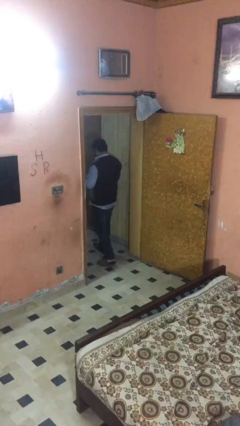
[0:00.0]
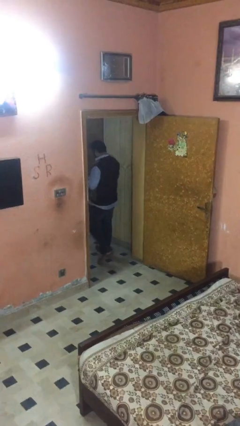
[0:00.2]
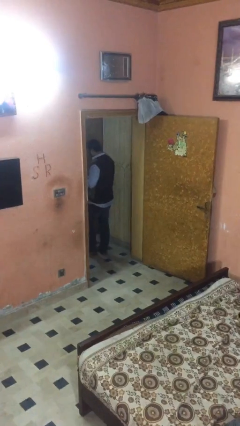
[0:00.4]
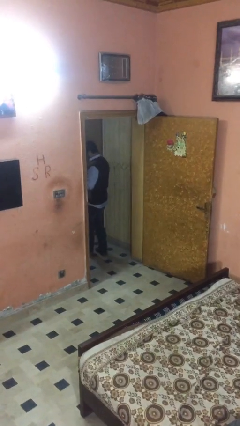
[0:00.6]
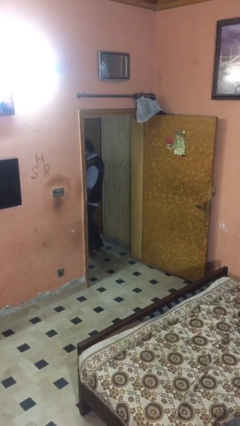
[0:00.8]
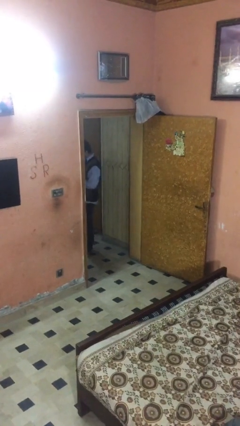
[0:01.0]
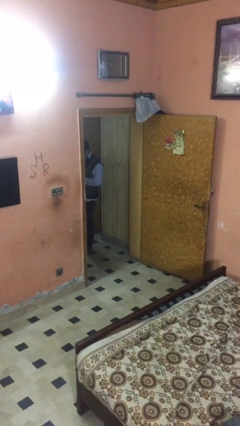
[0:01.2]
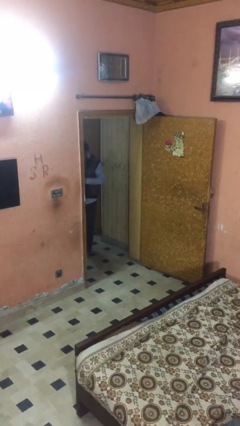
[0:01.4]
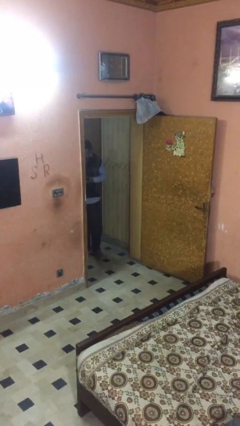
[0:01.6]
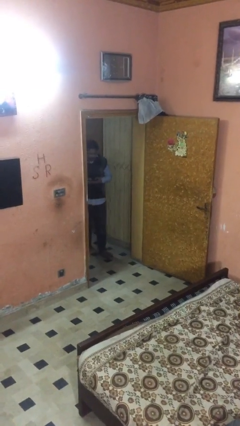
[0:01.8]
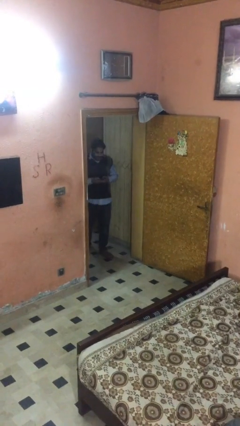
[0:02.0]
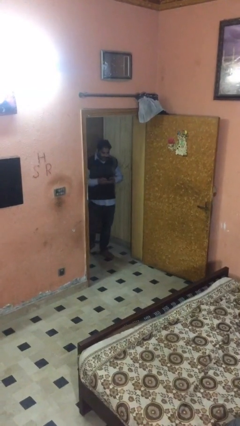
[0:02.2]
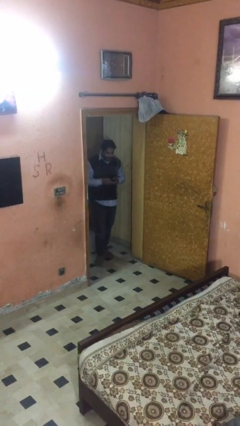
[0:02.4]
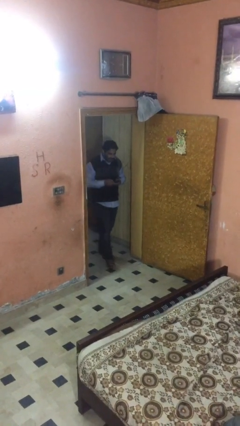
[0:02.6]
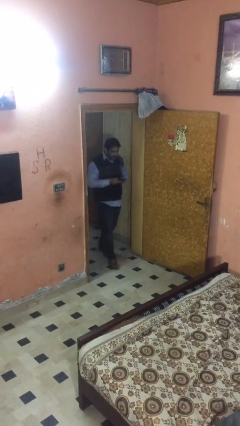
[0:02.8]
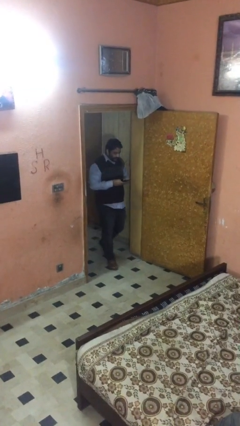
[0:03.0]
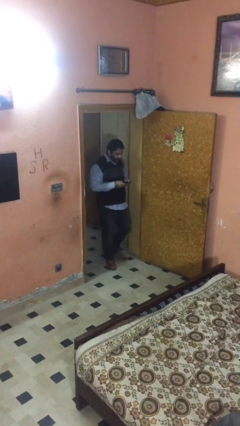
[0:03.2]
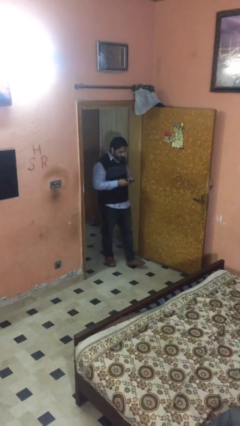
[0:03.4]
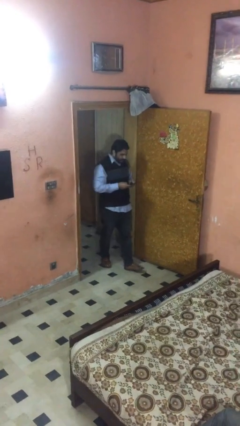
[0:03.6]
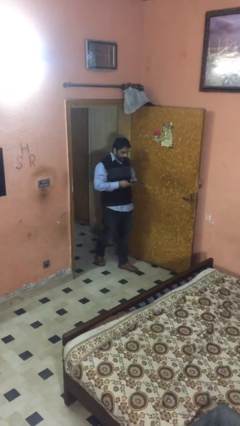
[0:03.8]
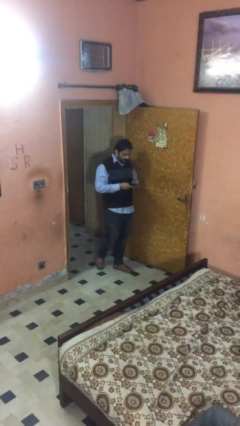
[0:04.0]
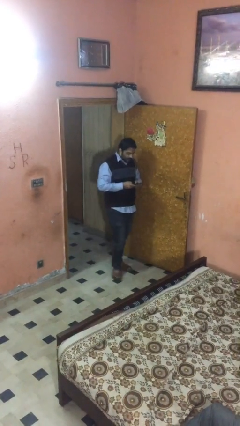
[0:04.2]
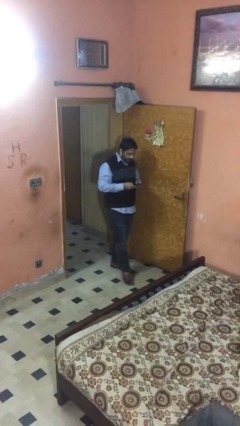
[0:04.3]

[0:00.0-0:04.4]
person enters scene through structure

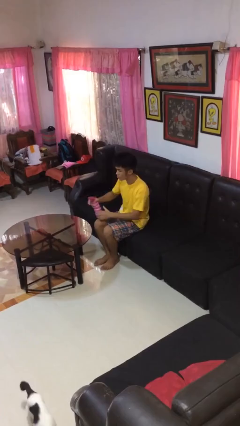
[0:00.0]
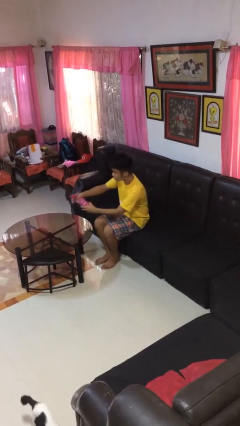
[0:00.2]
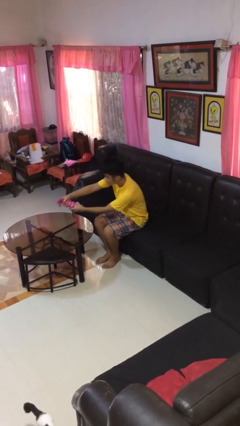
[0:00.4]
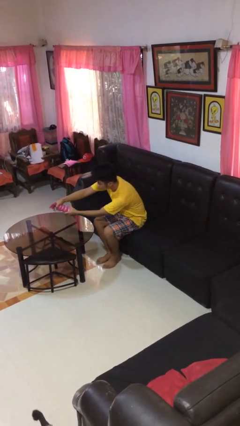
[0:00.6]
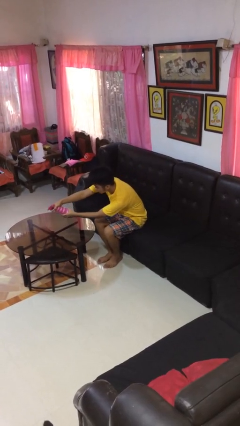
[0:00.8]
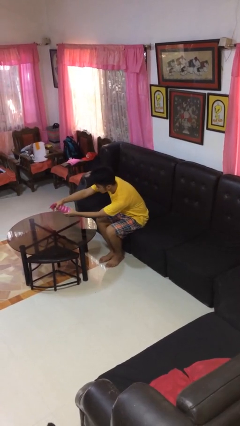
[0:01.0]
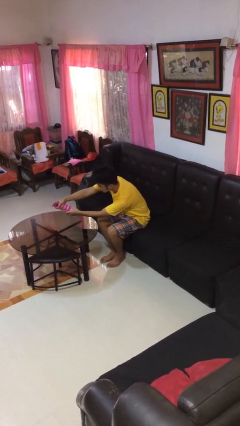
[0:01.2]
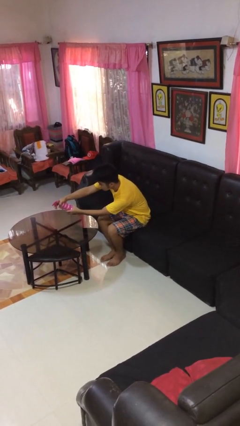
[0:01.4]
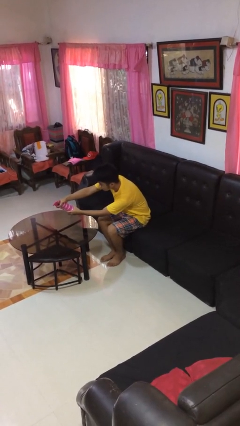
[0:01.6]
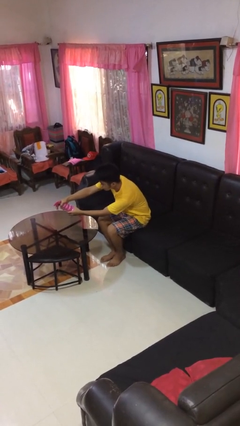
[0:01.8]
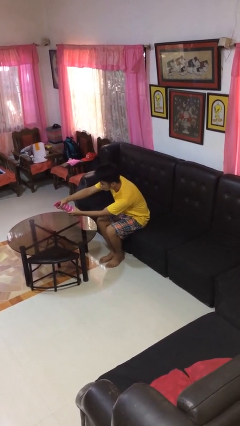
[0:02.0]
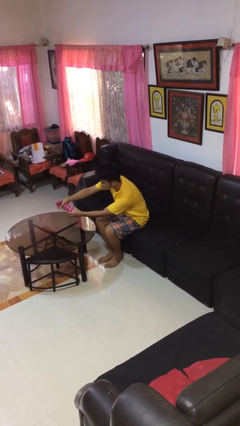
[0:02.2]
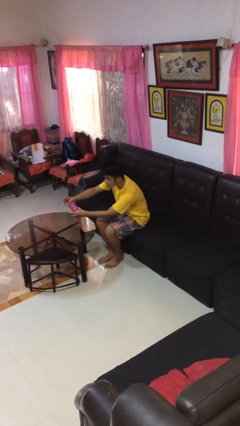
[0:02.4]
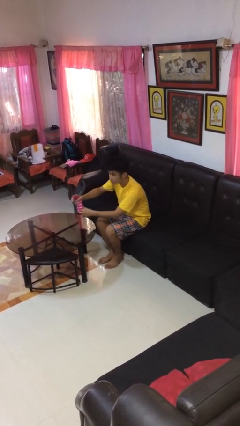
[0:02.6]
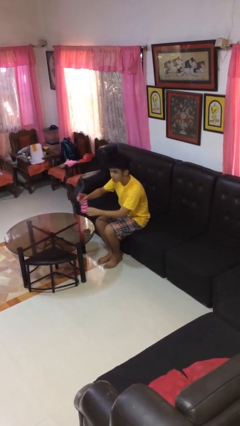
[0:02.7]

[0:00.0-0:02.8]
person sprays from bottle

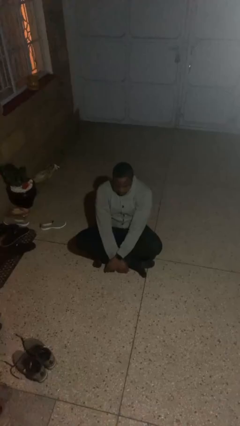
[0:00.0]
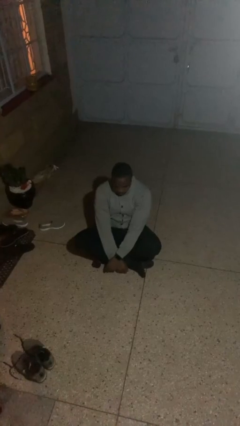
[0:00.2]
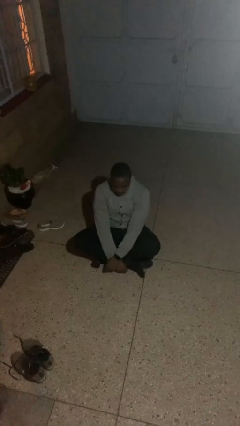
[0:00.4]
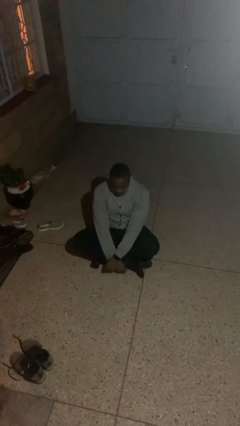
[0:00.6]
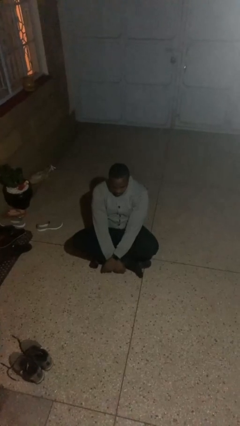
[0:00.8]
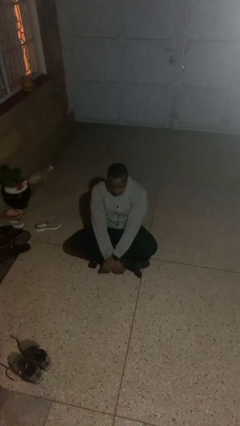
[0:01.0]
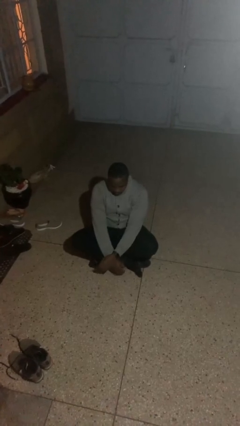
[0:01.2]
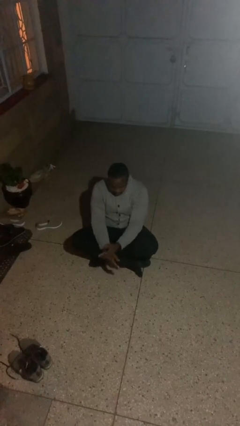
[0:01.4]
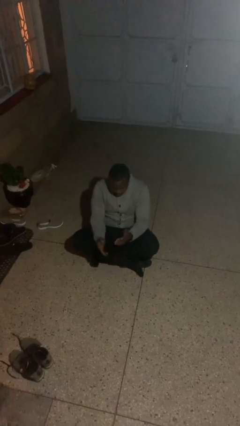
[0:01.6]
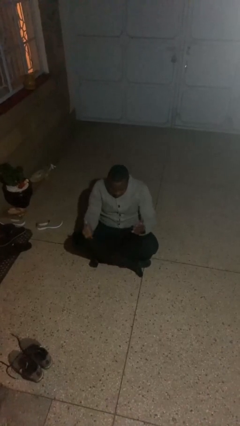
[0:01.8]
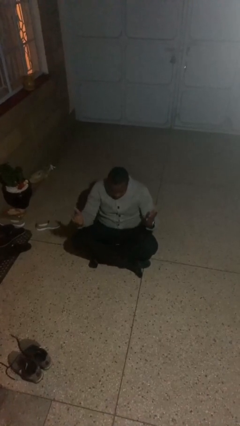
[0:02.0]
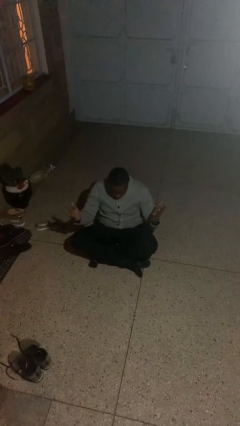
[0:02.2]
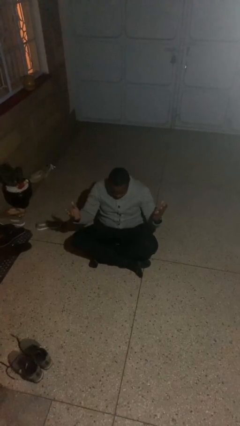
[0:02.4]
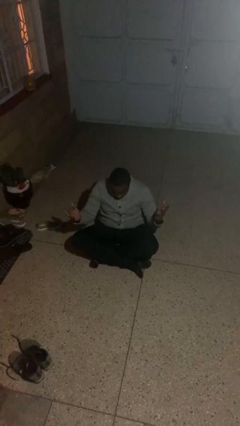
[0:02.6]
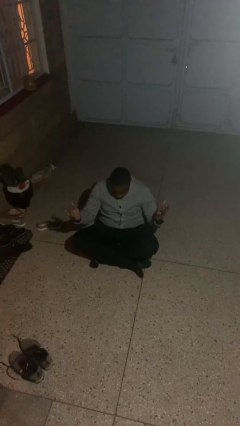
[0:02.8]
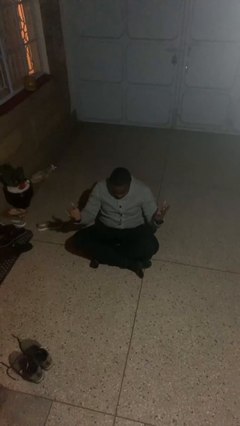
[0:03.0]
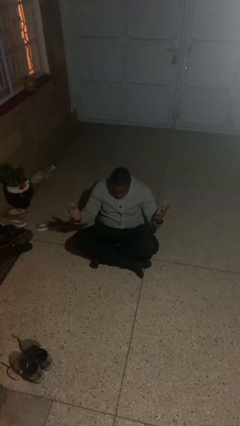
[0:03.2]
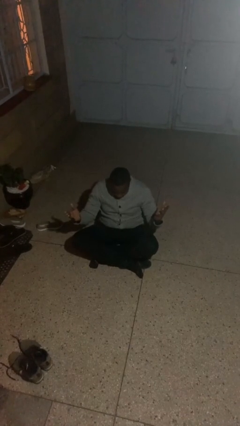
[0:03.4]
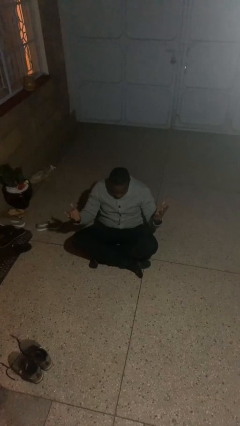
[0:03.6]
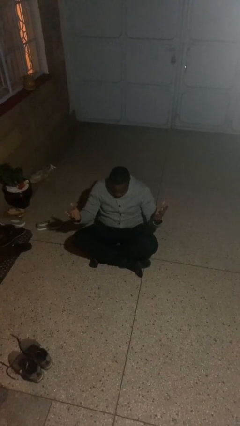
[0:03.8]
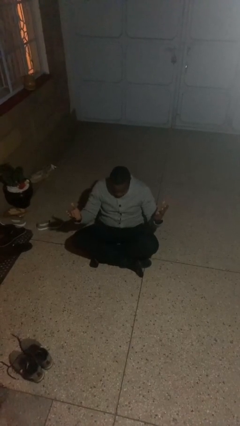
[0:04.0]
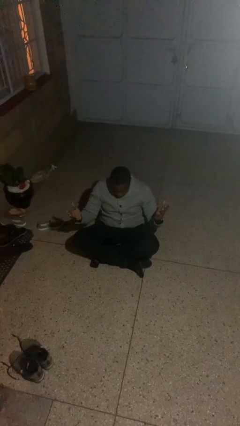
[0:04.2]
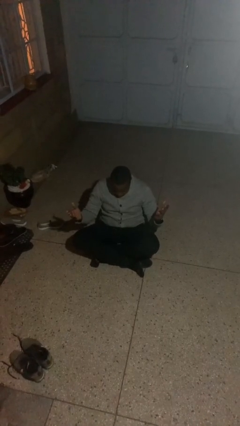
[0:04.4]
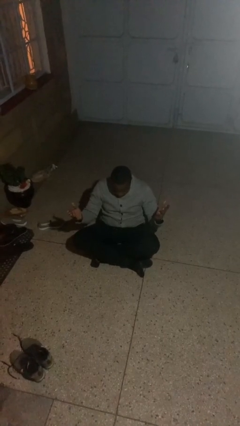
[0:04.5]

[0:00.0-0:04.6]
person prays

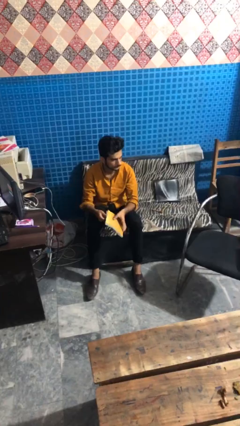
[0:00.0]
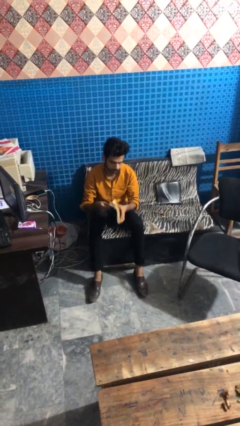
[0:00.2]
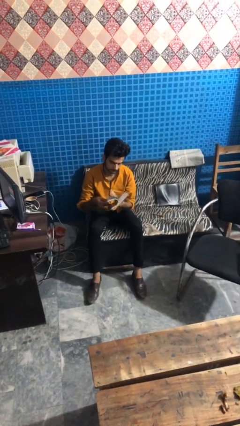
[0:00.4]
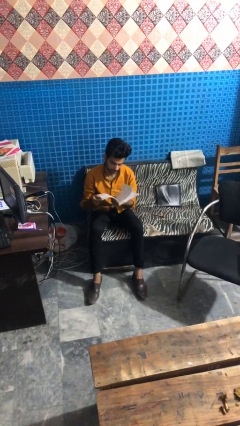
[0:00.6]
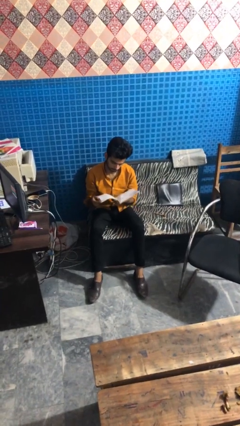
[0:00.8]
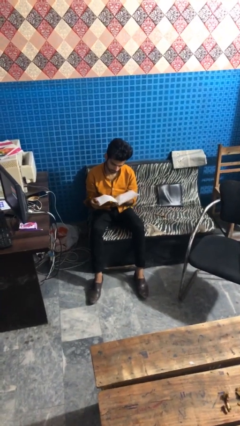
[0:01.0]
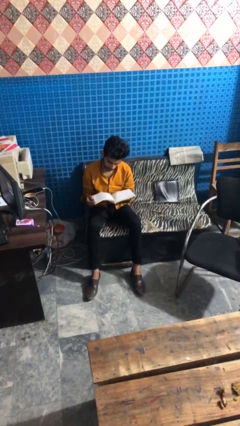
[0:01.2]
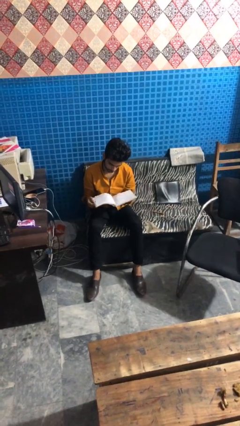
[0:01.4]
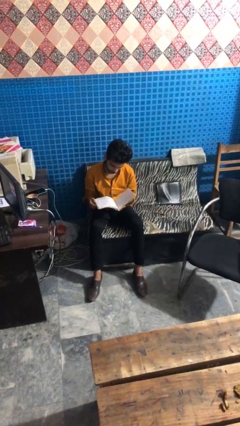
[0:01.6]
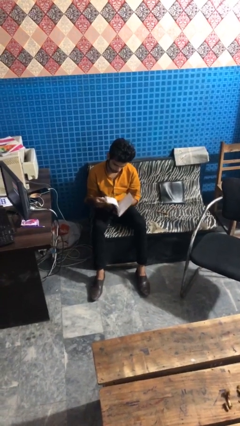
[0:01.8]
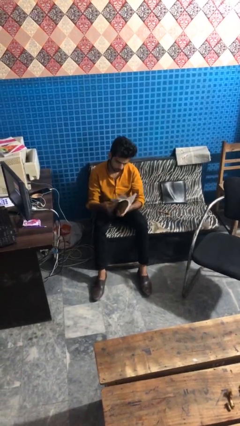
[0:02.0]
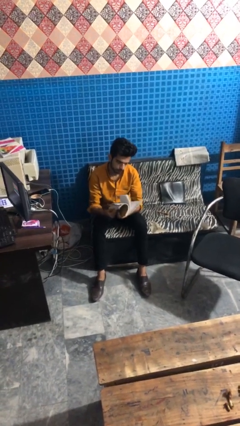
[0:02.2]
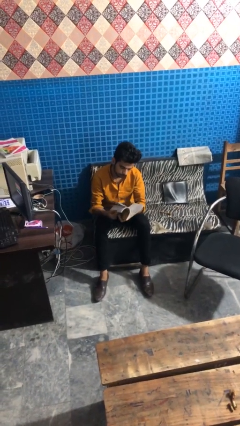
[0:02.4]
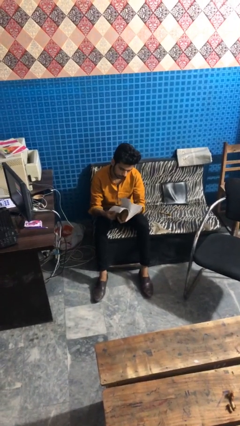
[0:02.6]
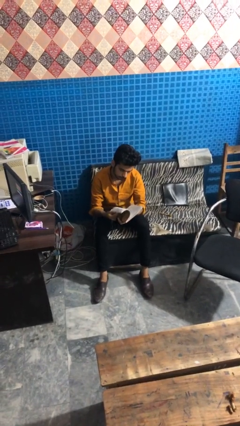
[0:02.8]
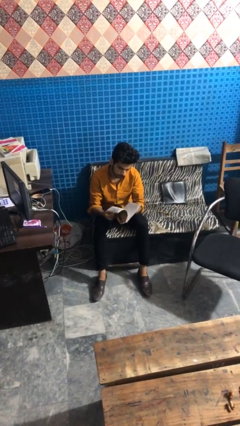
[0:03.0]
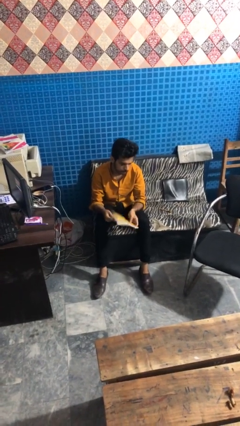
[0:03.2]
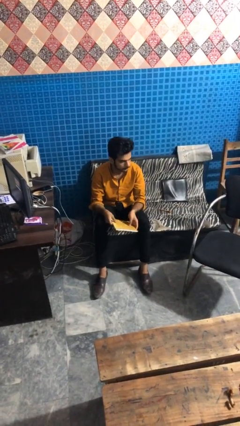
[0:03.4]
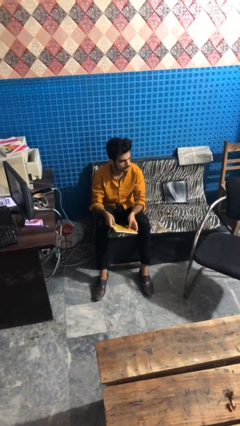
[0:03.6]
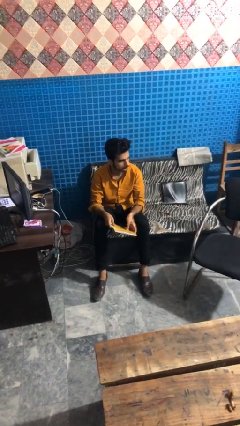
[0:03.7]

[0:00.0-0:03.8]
person reads magazine

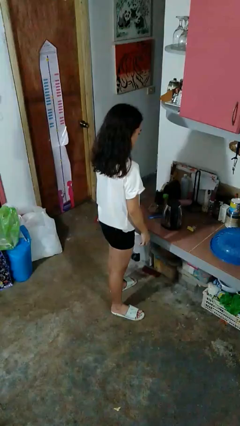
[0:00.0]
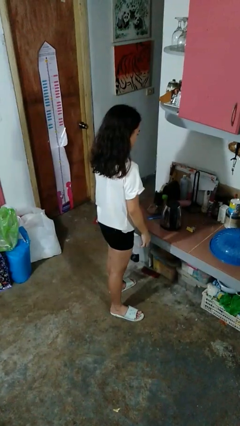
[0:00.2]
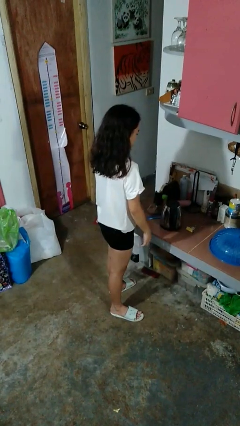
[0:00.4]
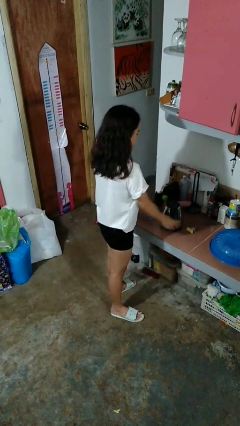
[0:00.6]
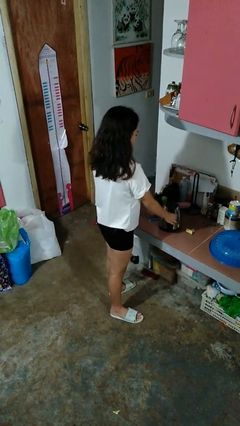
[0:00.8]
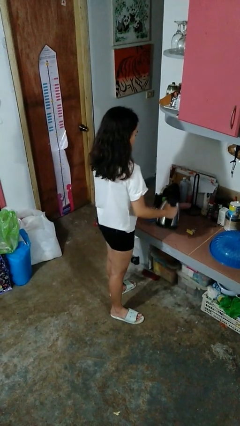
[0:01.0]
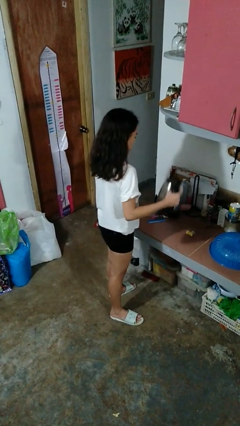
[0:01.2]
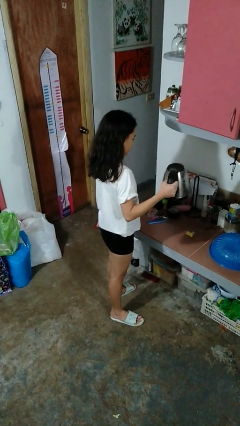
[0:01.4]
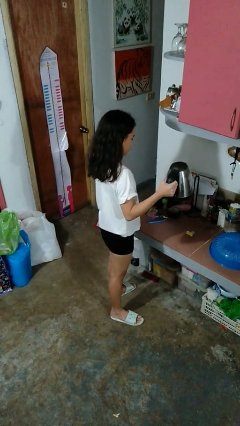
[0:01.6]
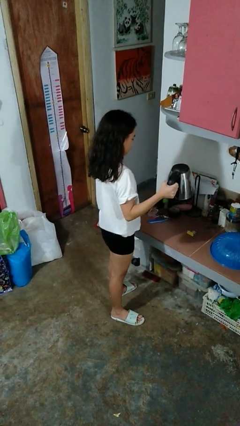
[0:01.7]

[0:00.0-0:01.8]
person picks up object from countertop
